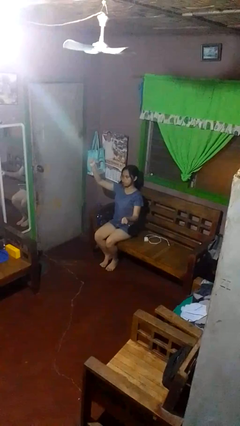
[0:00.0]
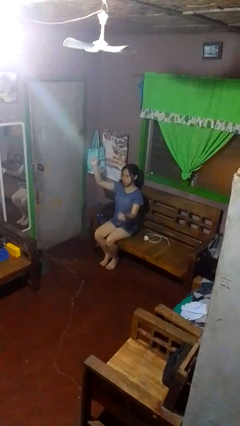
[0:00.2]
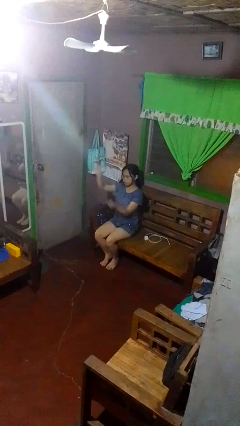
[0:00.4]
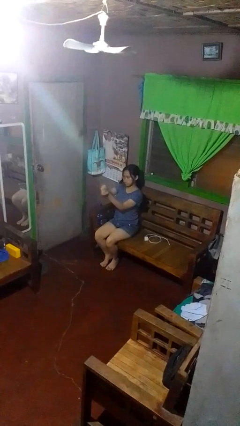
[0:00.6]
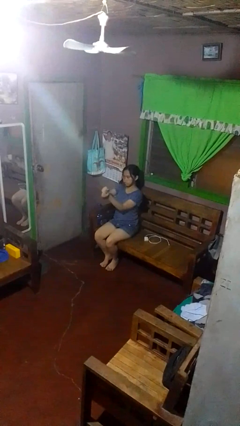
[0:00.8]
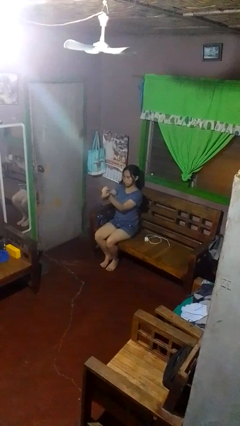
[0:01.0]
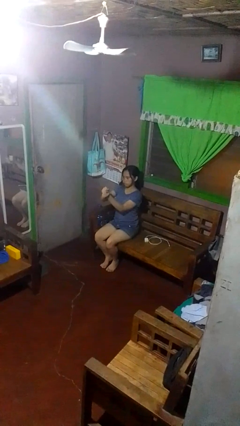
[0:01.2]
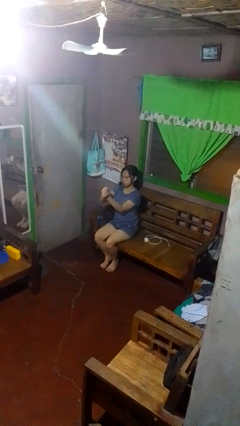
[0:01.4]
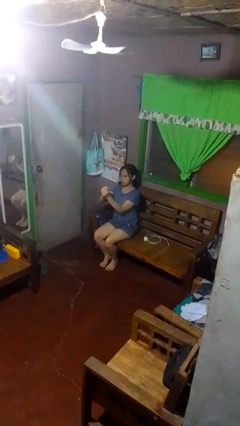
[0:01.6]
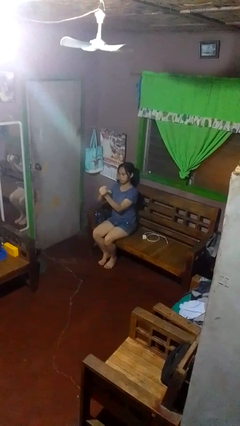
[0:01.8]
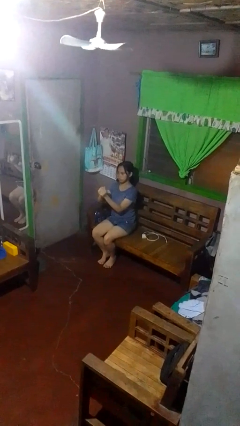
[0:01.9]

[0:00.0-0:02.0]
person gestures zoom out

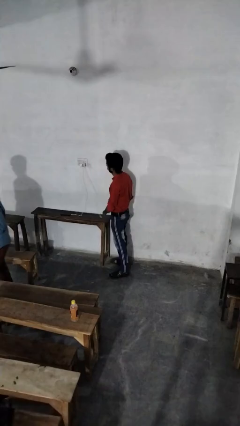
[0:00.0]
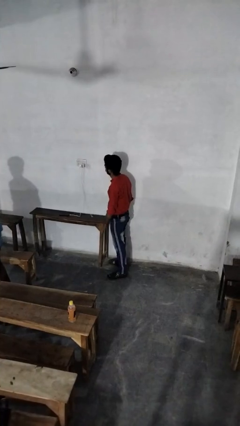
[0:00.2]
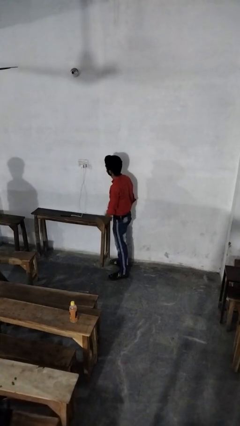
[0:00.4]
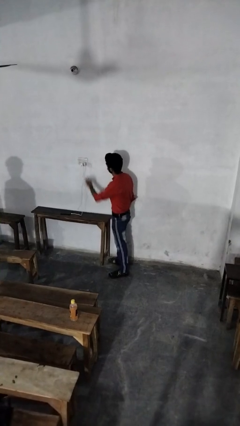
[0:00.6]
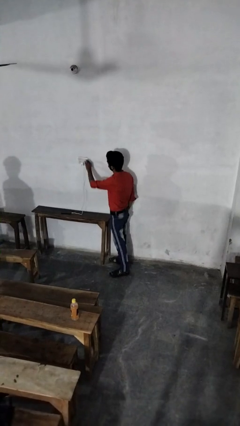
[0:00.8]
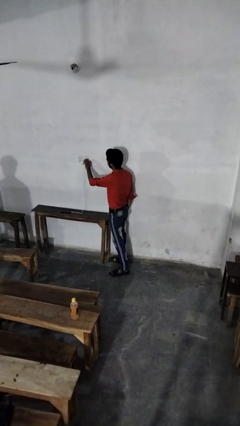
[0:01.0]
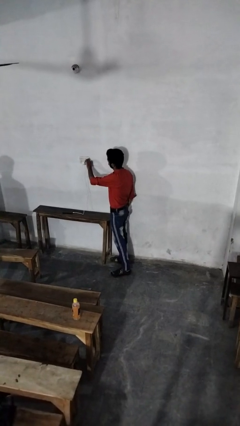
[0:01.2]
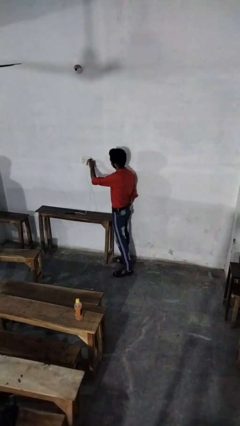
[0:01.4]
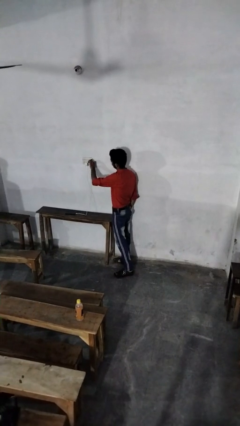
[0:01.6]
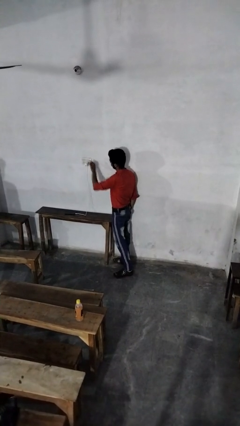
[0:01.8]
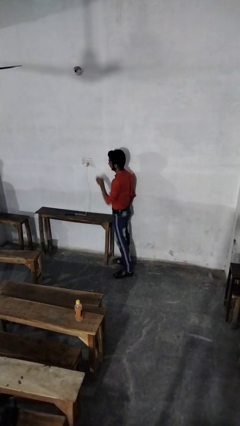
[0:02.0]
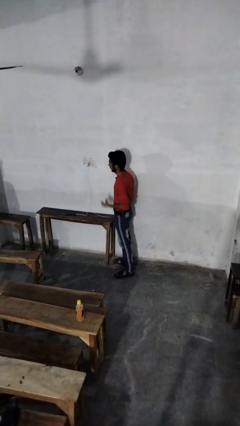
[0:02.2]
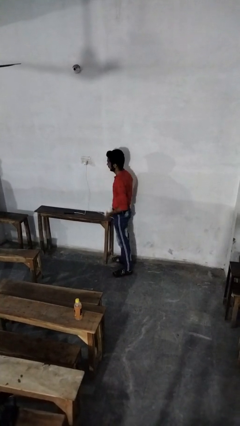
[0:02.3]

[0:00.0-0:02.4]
person unplugs from electrical socket

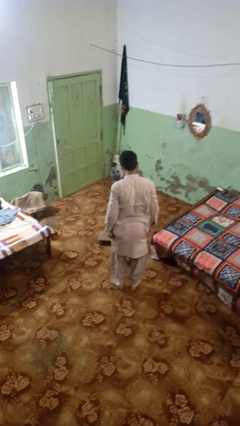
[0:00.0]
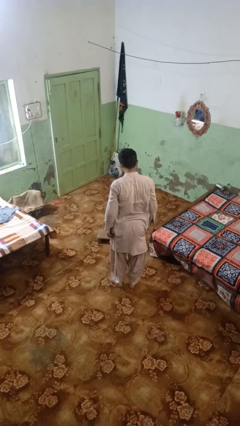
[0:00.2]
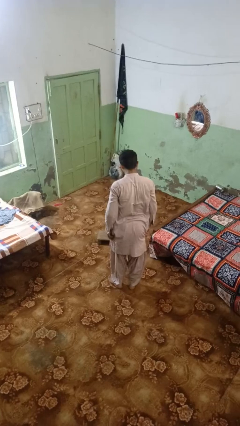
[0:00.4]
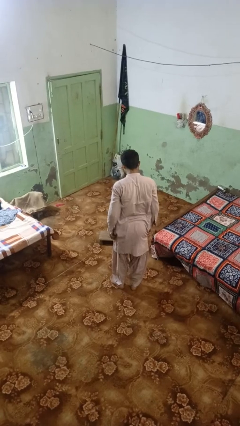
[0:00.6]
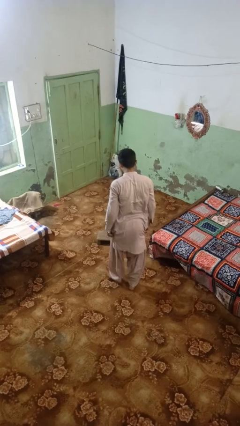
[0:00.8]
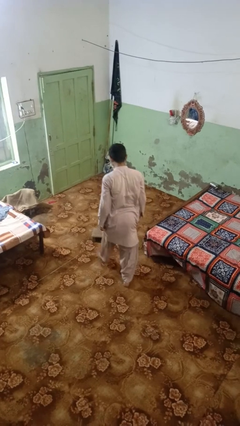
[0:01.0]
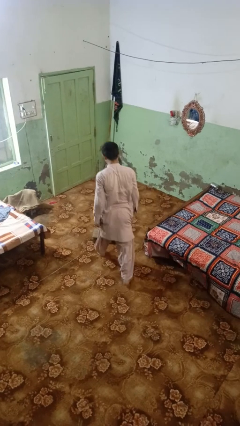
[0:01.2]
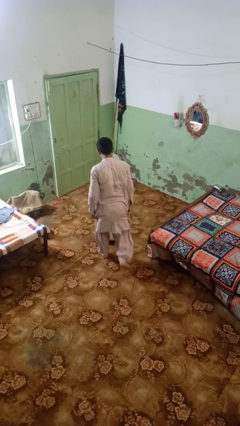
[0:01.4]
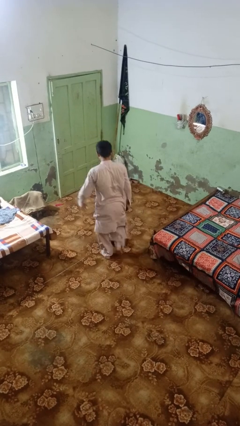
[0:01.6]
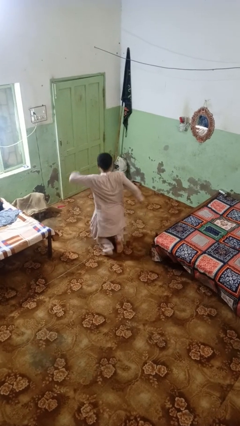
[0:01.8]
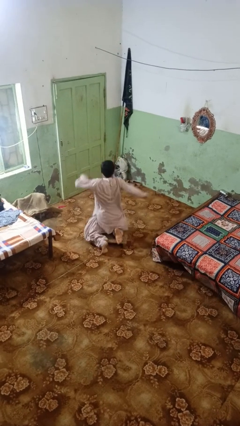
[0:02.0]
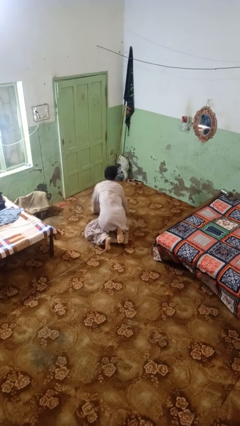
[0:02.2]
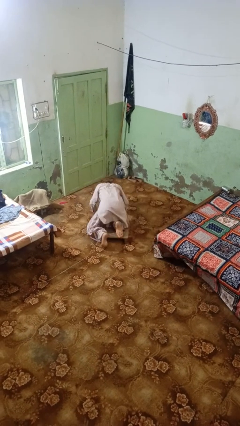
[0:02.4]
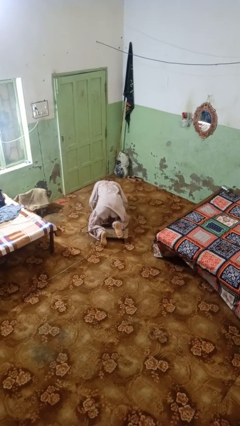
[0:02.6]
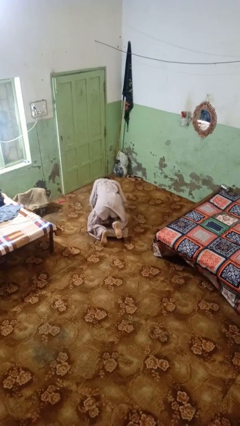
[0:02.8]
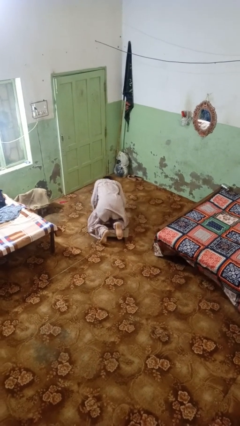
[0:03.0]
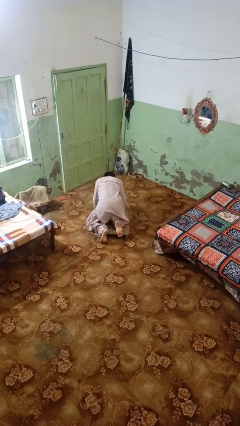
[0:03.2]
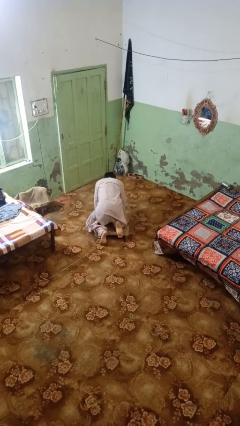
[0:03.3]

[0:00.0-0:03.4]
person trips on object on floor

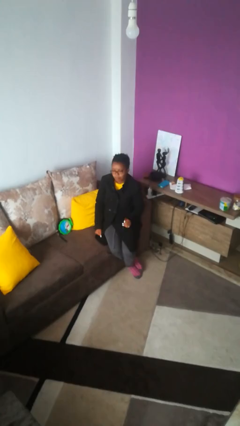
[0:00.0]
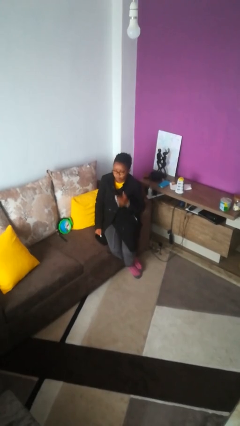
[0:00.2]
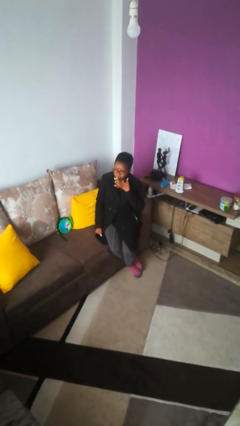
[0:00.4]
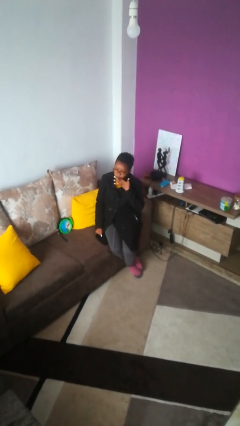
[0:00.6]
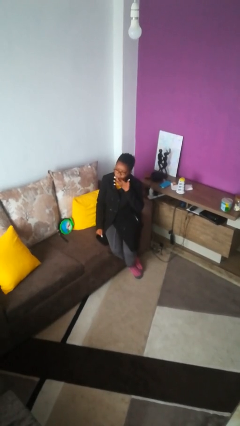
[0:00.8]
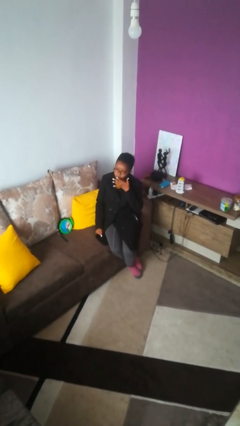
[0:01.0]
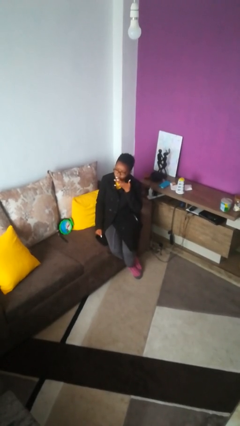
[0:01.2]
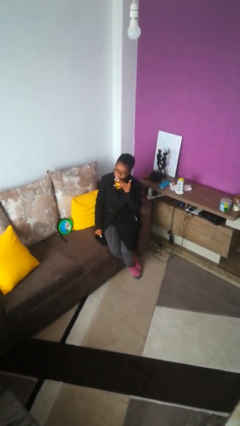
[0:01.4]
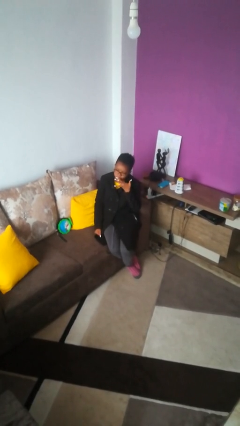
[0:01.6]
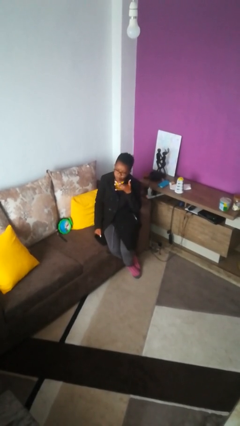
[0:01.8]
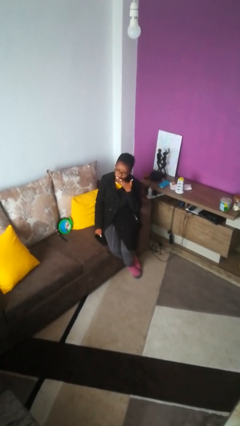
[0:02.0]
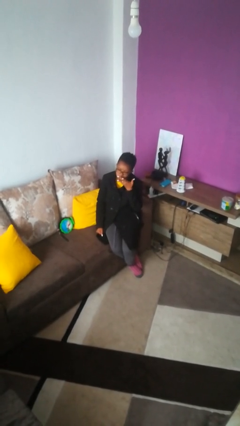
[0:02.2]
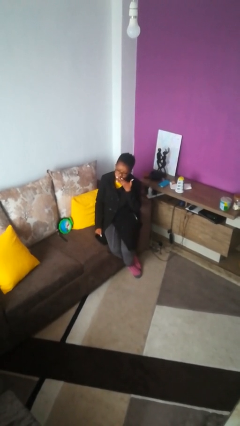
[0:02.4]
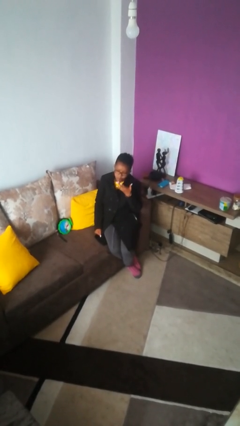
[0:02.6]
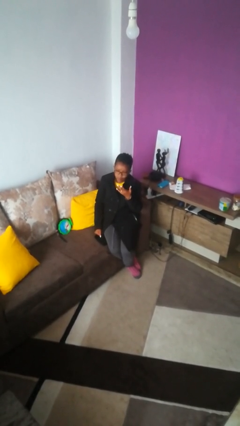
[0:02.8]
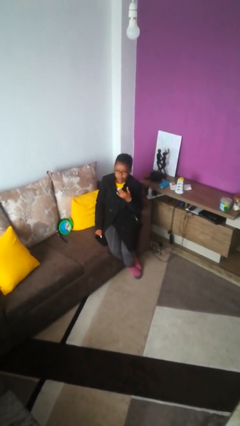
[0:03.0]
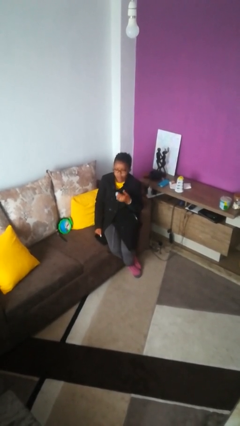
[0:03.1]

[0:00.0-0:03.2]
person licks fingers

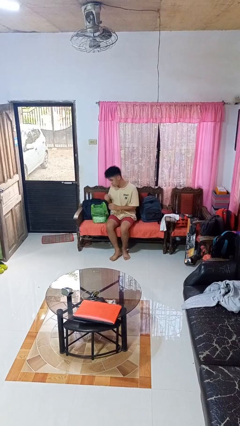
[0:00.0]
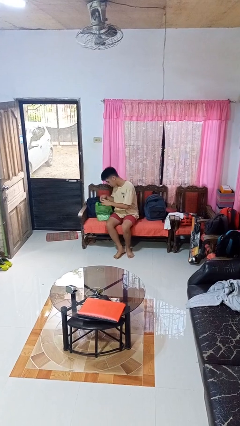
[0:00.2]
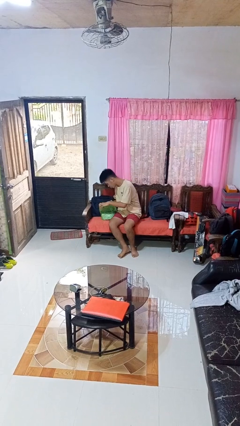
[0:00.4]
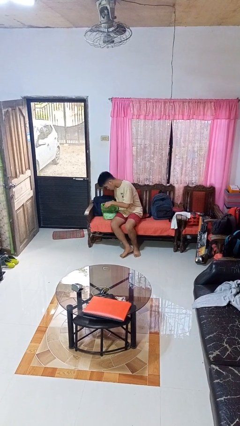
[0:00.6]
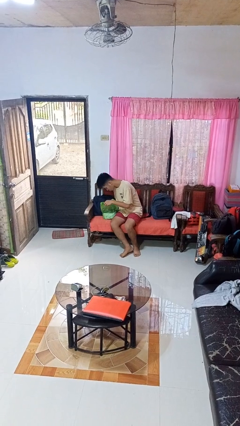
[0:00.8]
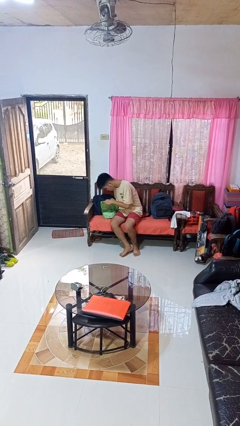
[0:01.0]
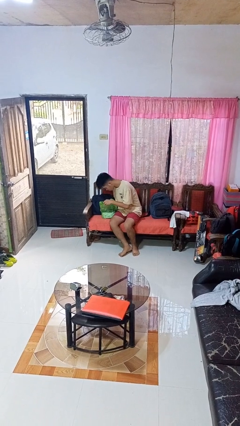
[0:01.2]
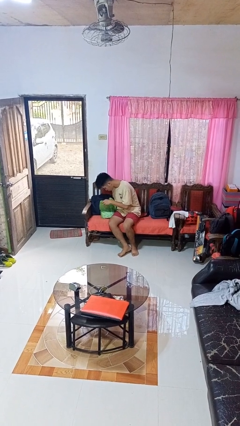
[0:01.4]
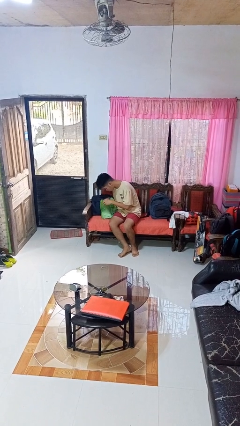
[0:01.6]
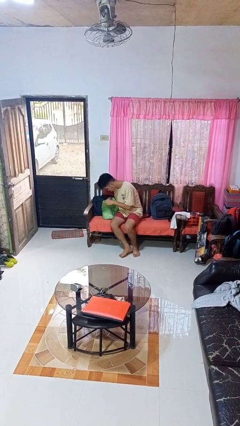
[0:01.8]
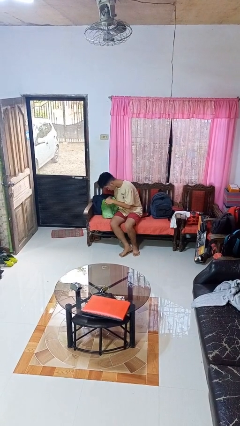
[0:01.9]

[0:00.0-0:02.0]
person searches in bag

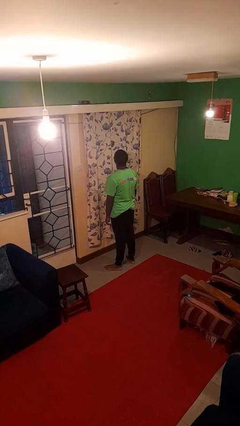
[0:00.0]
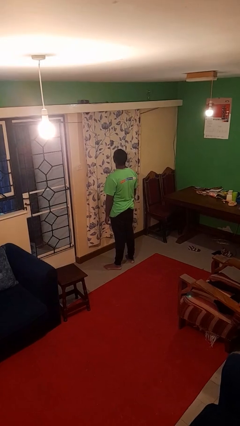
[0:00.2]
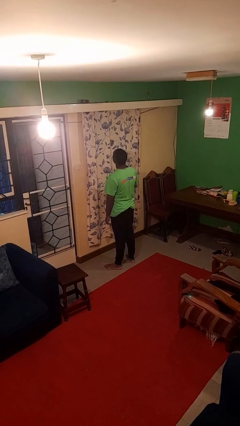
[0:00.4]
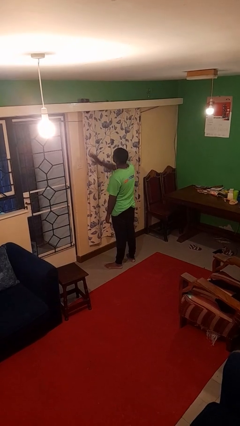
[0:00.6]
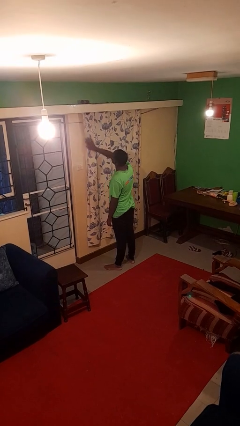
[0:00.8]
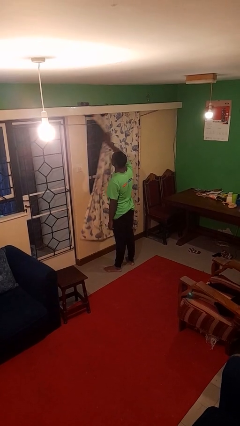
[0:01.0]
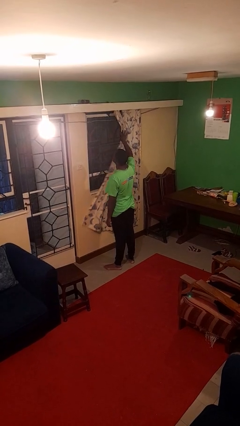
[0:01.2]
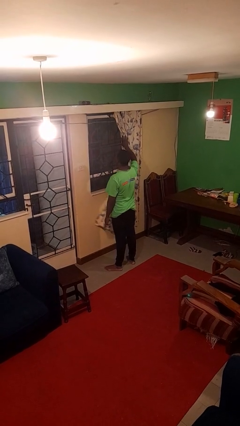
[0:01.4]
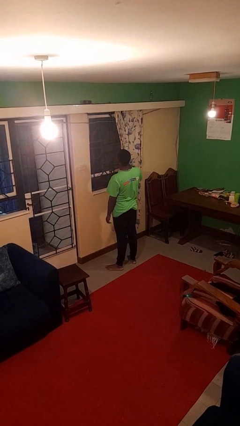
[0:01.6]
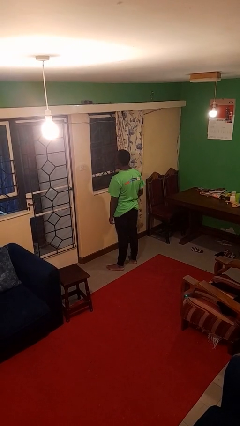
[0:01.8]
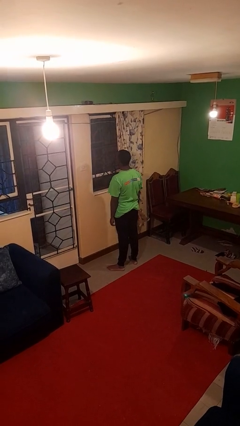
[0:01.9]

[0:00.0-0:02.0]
person opens curtains

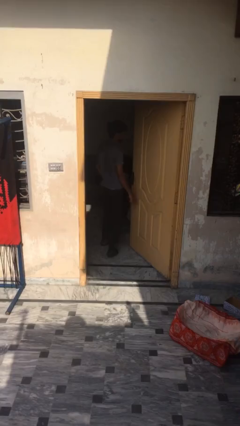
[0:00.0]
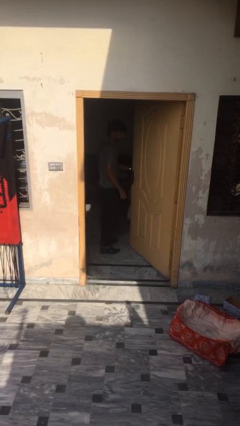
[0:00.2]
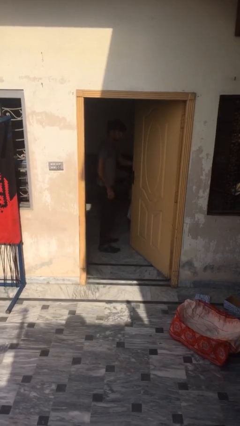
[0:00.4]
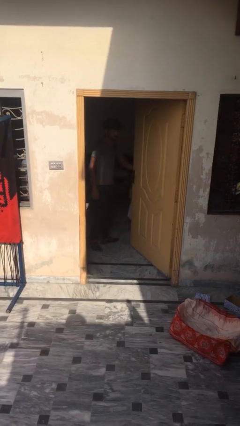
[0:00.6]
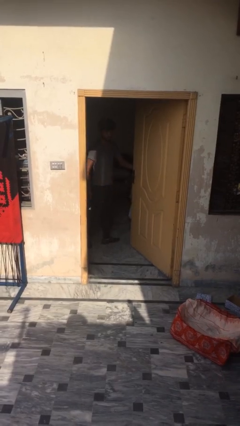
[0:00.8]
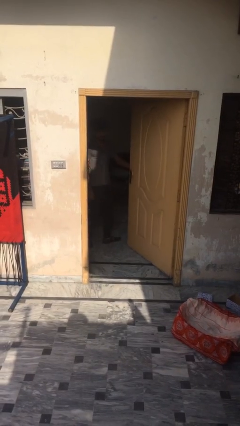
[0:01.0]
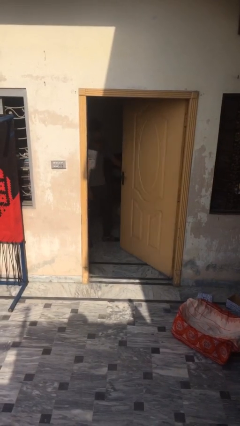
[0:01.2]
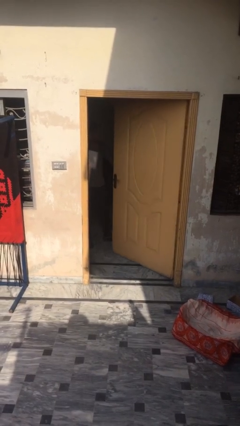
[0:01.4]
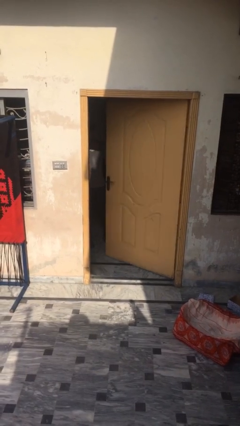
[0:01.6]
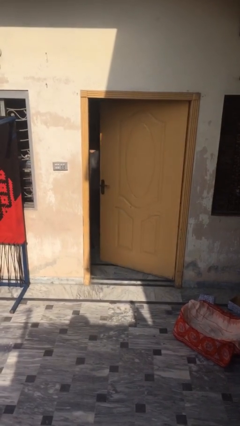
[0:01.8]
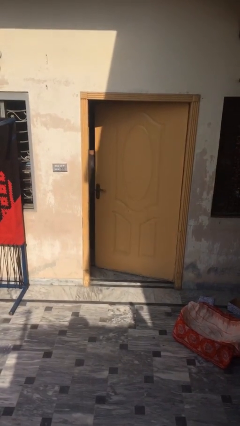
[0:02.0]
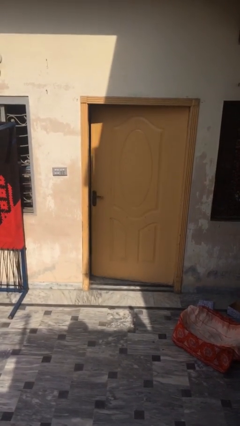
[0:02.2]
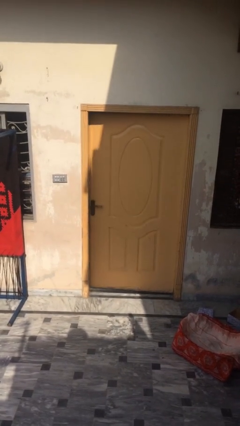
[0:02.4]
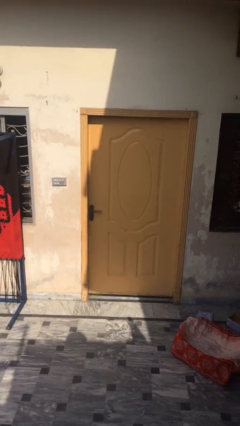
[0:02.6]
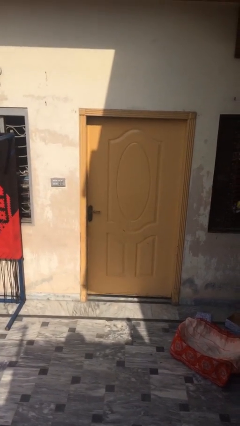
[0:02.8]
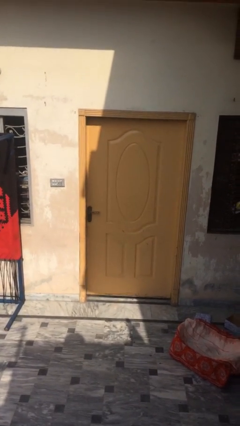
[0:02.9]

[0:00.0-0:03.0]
person closes facility door
